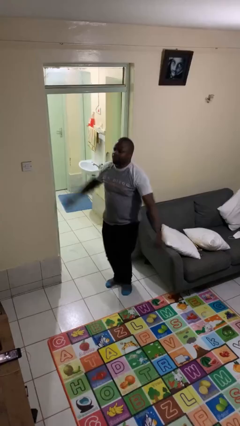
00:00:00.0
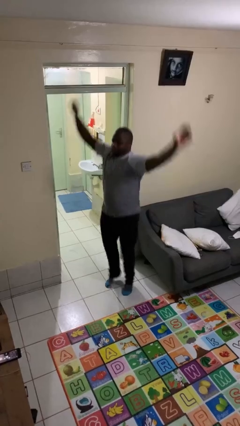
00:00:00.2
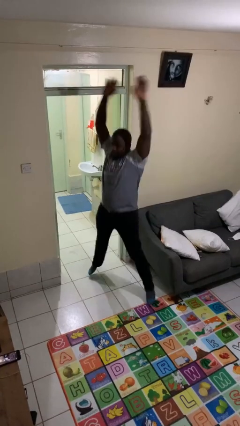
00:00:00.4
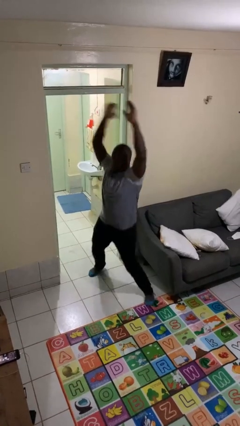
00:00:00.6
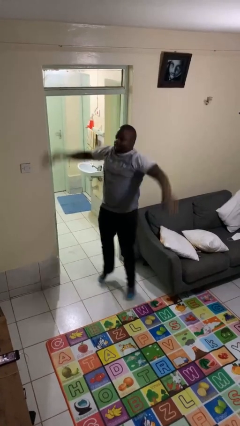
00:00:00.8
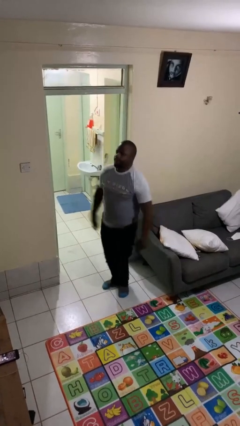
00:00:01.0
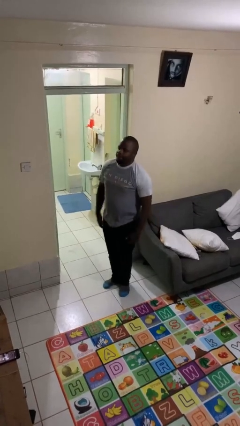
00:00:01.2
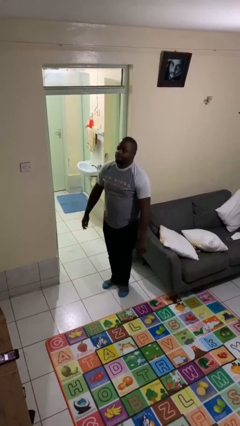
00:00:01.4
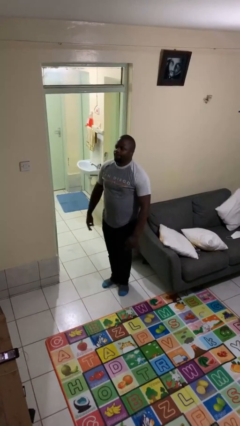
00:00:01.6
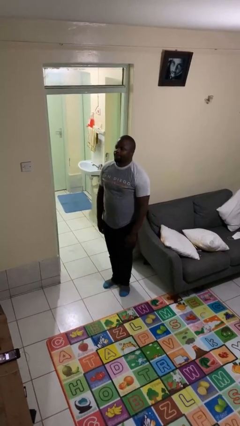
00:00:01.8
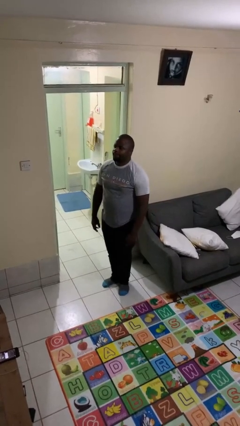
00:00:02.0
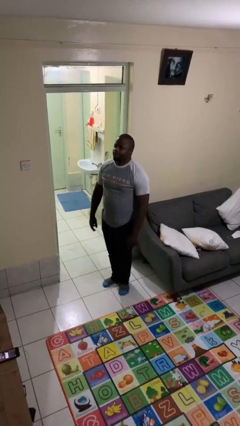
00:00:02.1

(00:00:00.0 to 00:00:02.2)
person exercises with jumping jacks

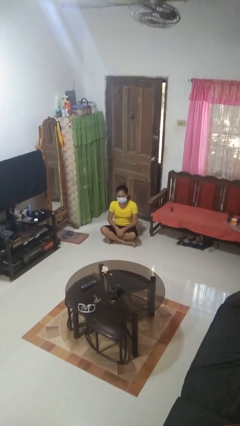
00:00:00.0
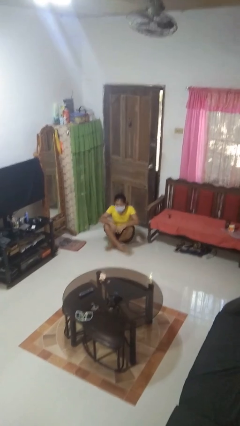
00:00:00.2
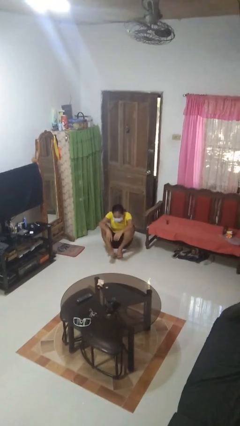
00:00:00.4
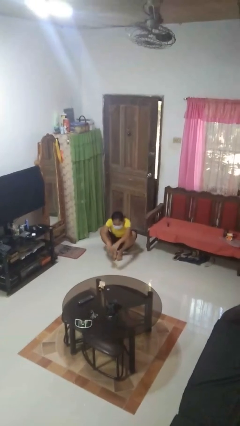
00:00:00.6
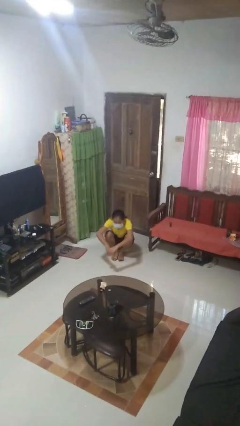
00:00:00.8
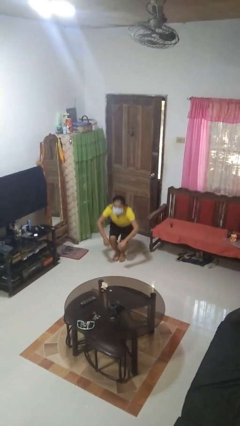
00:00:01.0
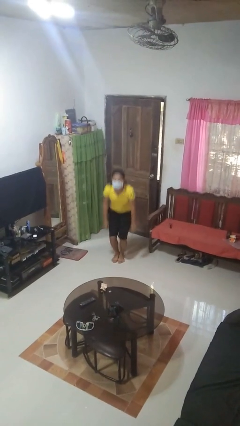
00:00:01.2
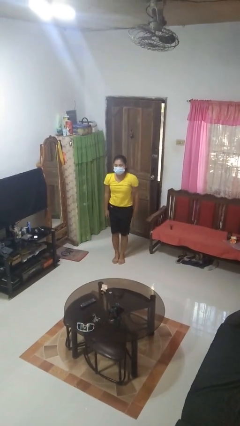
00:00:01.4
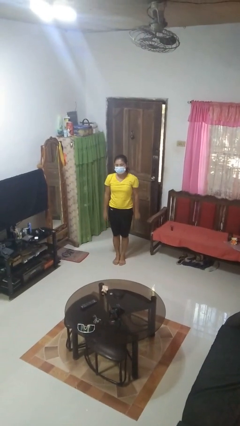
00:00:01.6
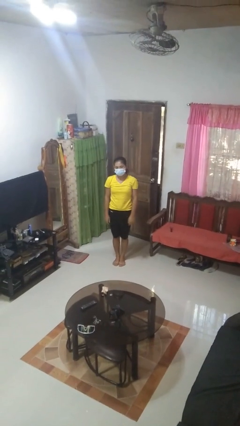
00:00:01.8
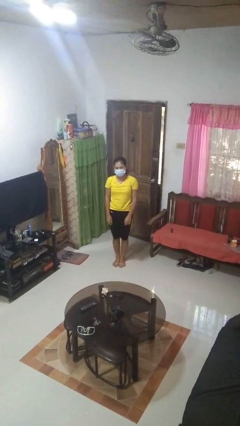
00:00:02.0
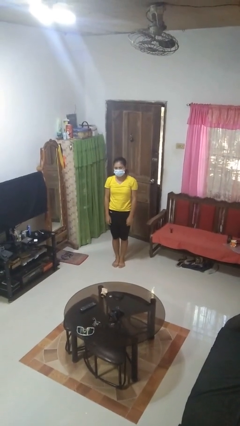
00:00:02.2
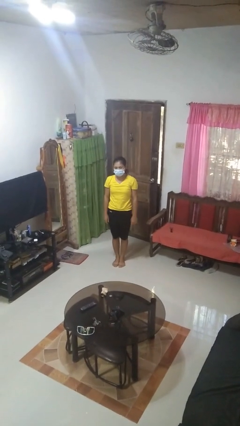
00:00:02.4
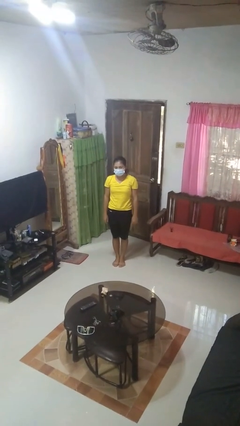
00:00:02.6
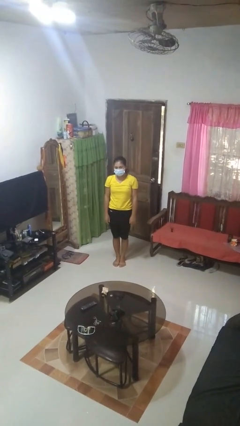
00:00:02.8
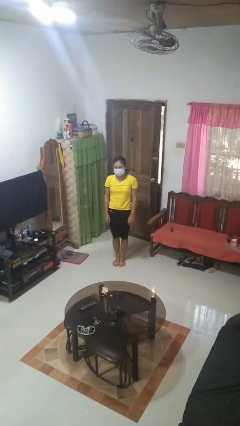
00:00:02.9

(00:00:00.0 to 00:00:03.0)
person stands up from floor

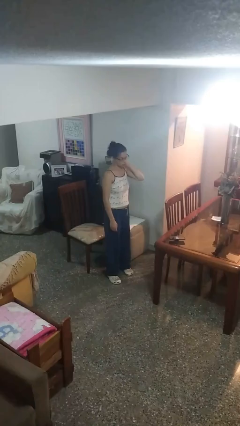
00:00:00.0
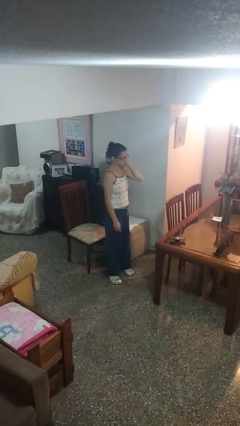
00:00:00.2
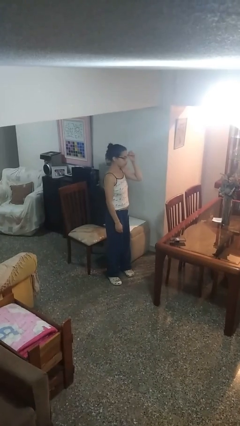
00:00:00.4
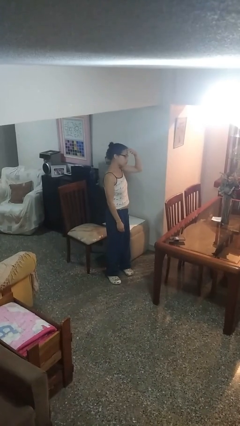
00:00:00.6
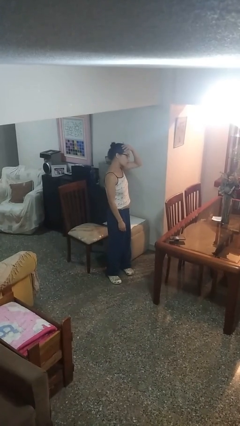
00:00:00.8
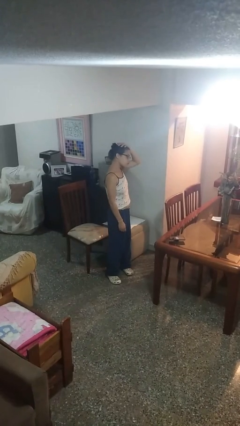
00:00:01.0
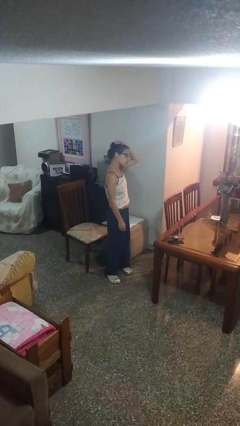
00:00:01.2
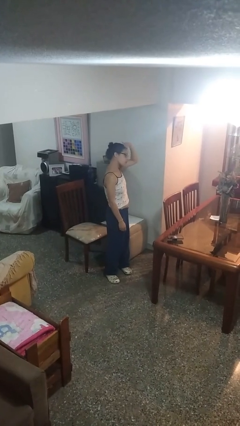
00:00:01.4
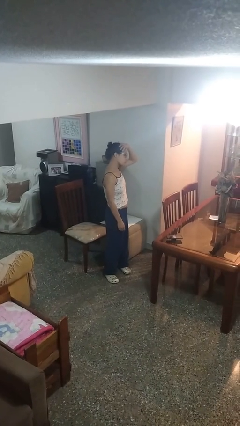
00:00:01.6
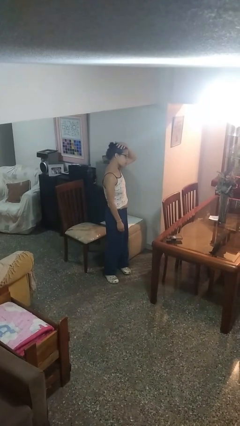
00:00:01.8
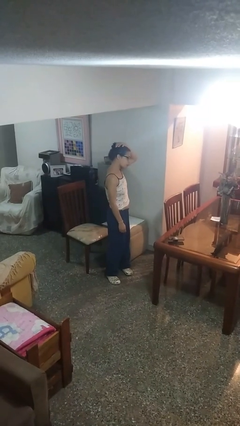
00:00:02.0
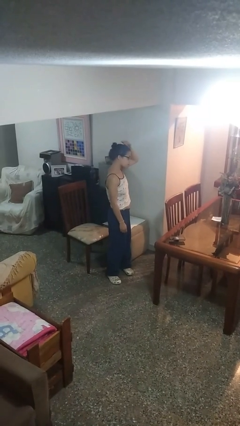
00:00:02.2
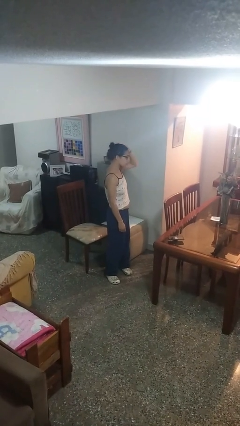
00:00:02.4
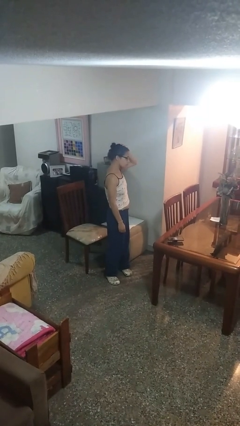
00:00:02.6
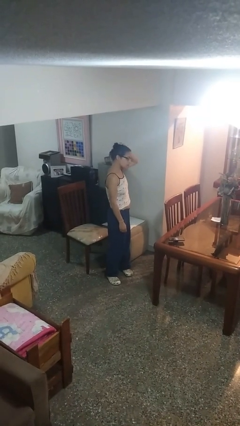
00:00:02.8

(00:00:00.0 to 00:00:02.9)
person pats head

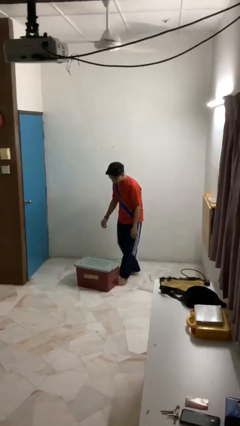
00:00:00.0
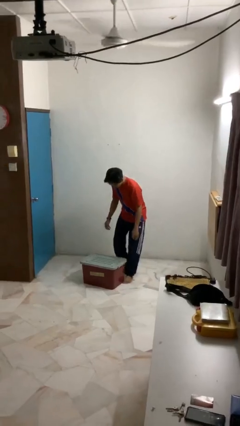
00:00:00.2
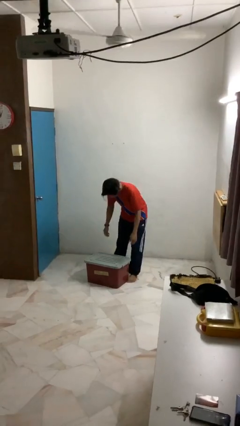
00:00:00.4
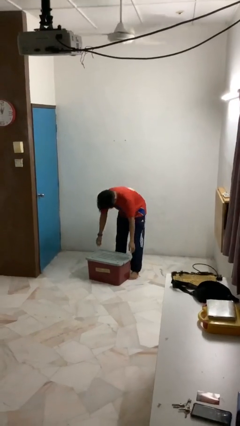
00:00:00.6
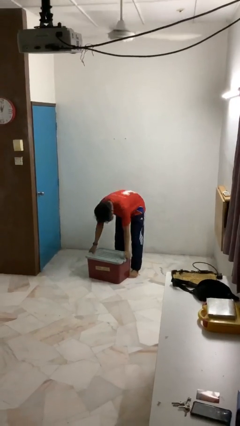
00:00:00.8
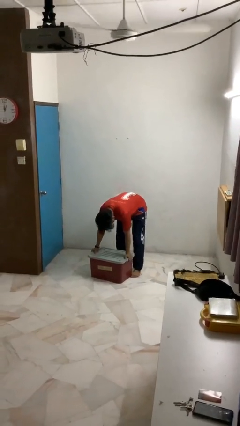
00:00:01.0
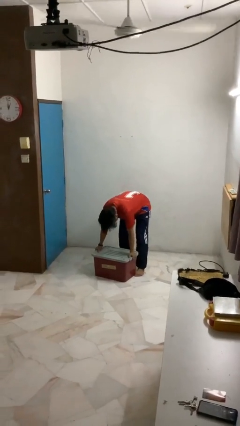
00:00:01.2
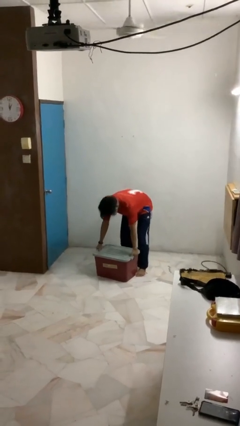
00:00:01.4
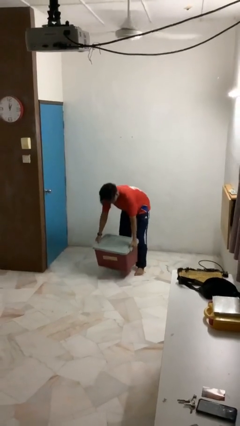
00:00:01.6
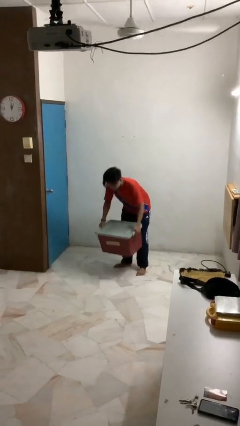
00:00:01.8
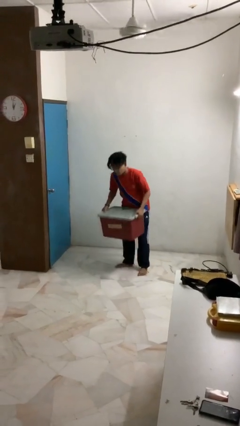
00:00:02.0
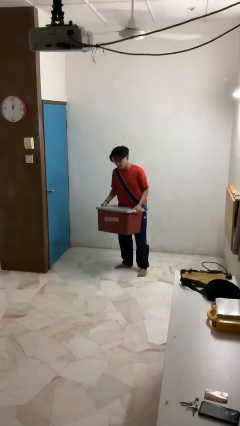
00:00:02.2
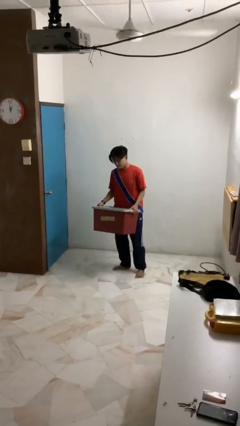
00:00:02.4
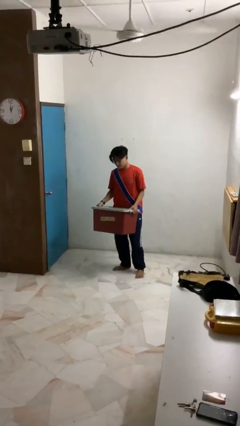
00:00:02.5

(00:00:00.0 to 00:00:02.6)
person picks up object from floor

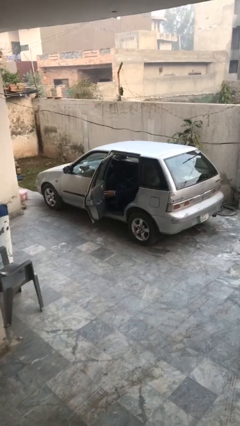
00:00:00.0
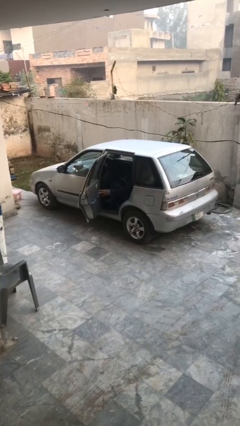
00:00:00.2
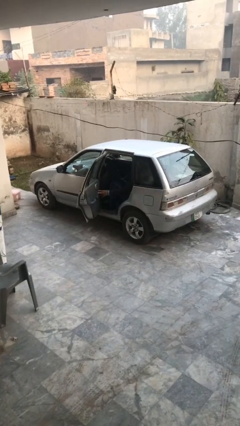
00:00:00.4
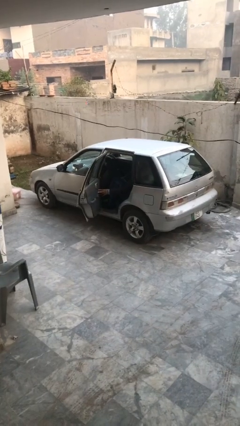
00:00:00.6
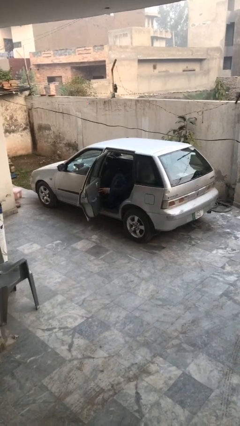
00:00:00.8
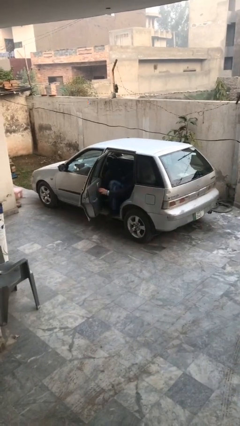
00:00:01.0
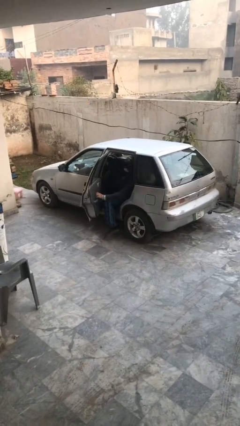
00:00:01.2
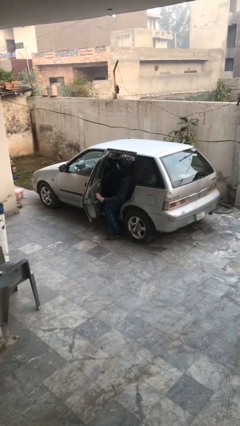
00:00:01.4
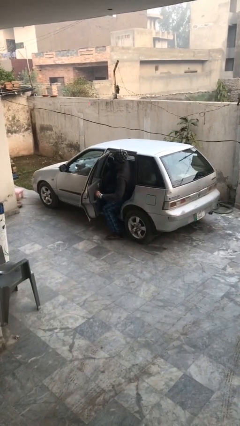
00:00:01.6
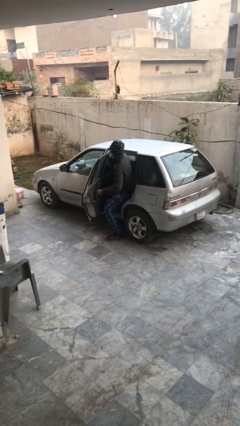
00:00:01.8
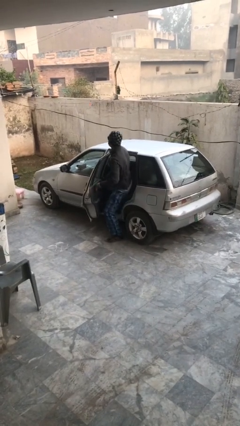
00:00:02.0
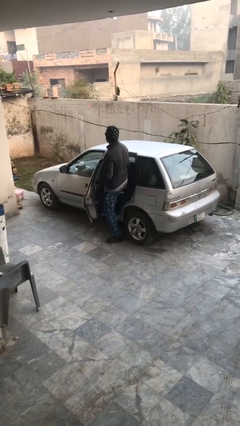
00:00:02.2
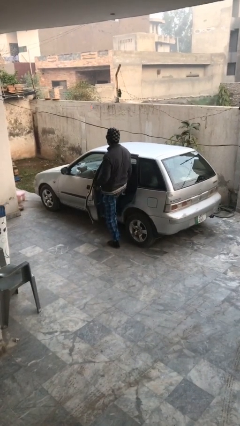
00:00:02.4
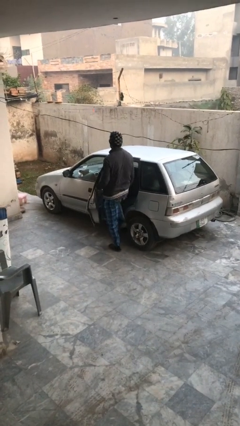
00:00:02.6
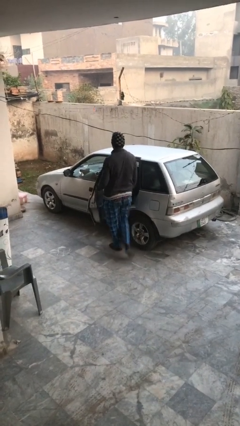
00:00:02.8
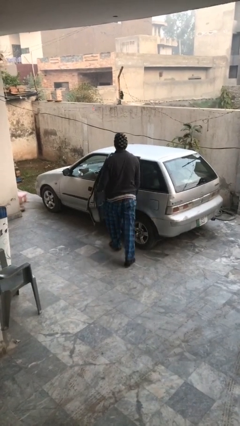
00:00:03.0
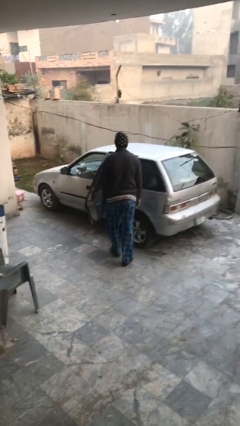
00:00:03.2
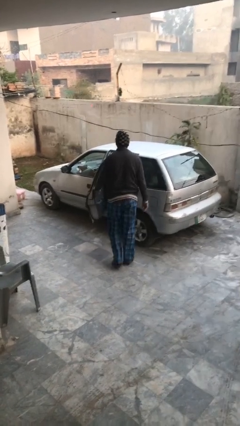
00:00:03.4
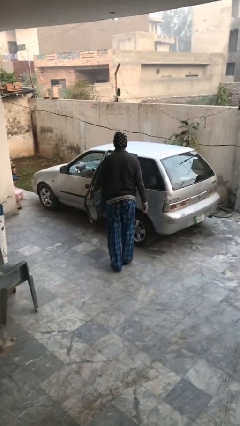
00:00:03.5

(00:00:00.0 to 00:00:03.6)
person exits car

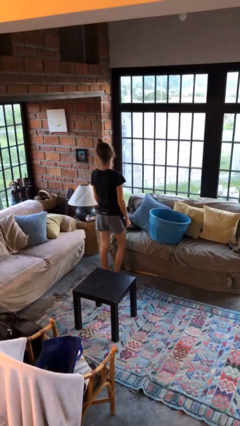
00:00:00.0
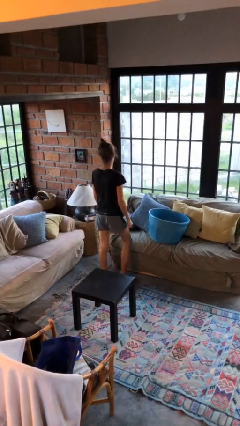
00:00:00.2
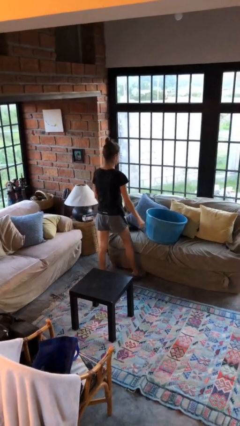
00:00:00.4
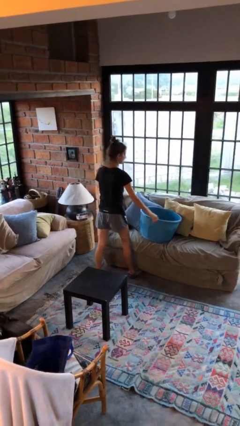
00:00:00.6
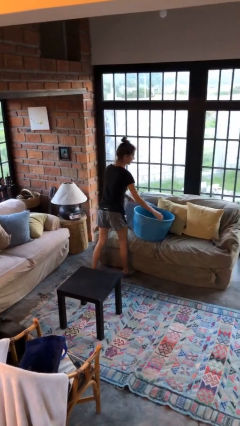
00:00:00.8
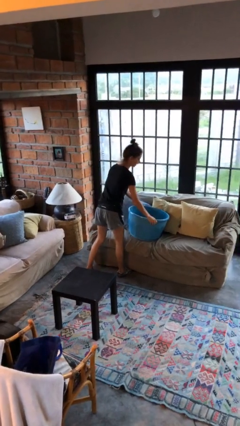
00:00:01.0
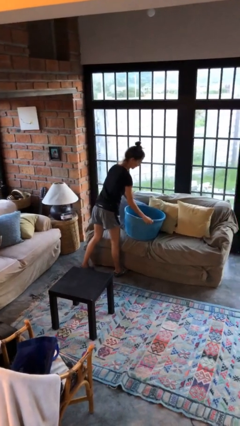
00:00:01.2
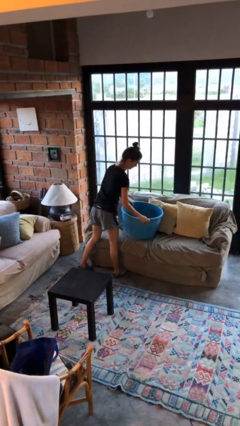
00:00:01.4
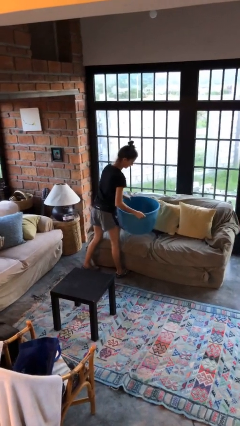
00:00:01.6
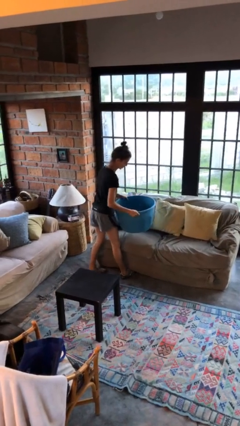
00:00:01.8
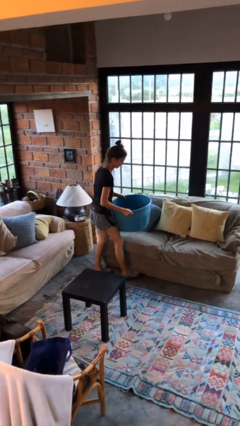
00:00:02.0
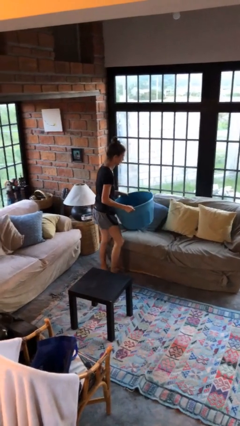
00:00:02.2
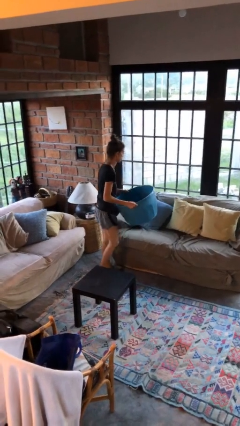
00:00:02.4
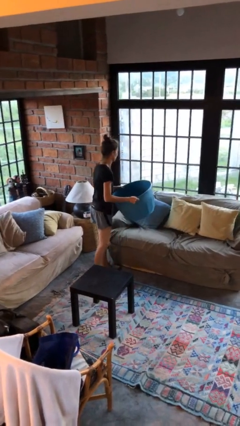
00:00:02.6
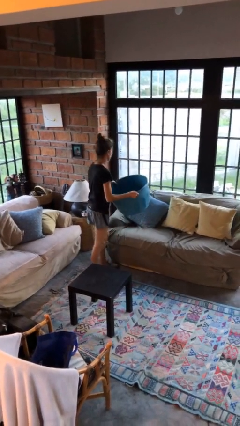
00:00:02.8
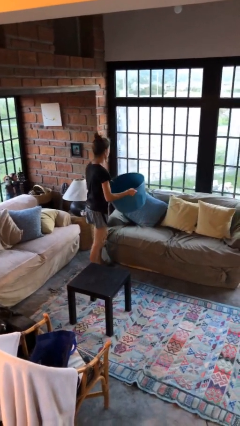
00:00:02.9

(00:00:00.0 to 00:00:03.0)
person picks up object from couch
